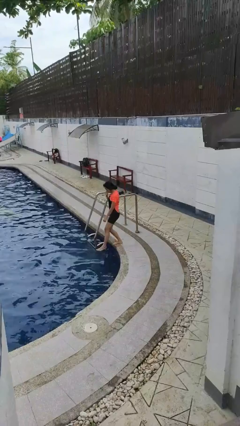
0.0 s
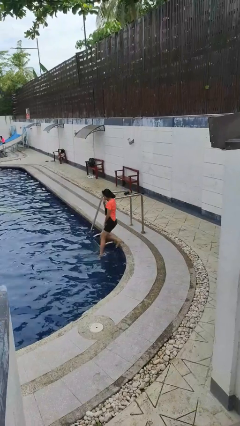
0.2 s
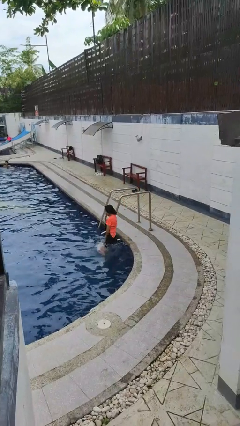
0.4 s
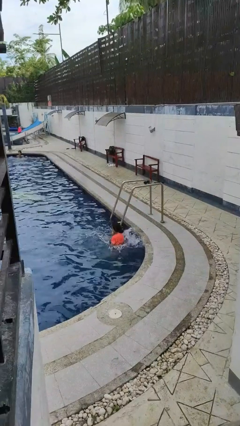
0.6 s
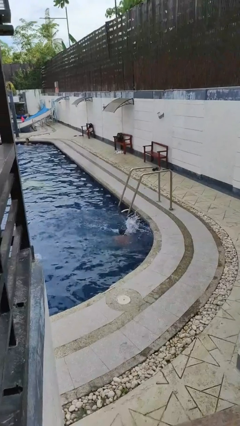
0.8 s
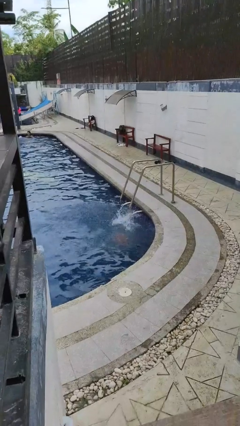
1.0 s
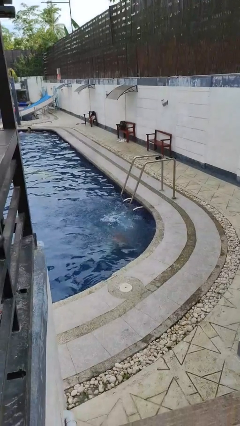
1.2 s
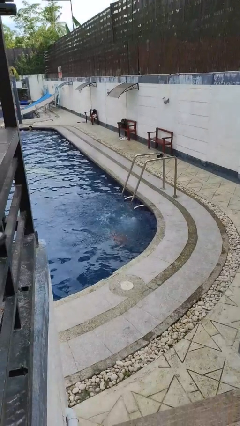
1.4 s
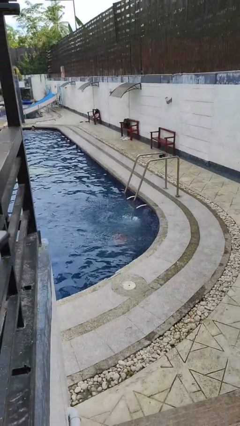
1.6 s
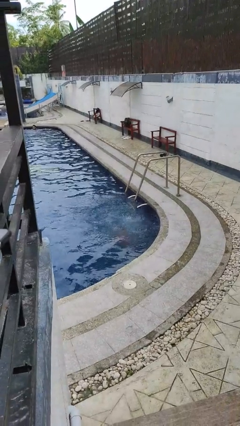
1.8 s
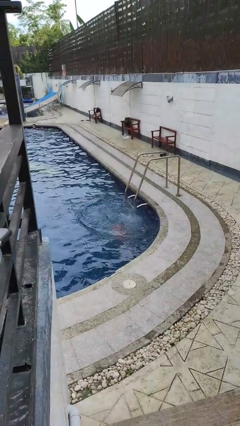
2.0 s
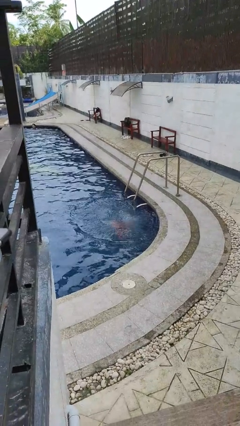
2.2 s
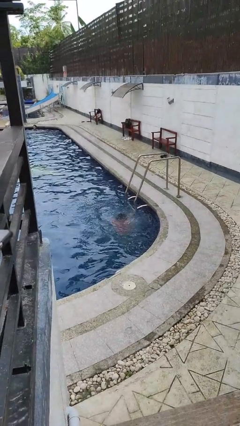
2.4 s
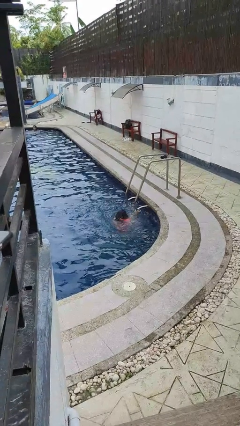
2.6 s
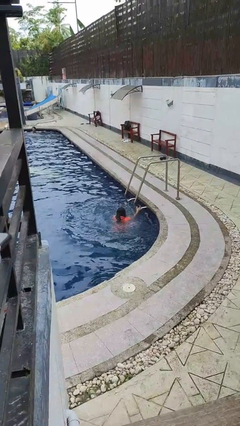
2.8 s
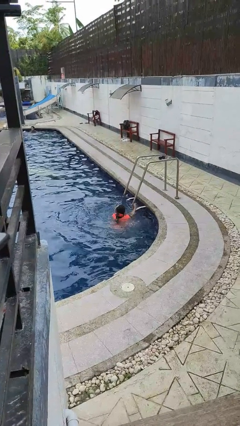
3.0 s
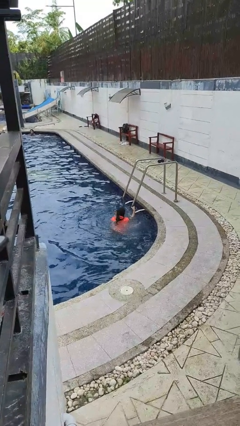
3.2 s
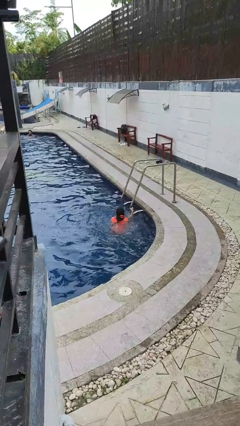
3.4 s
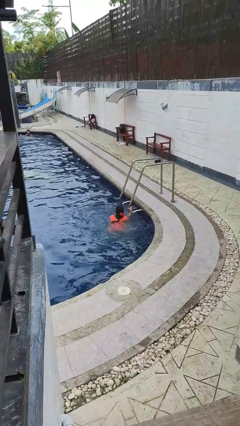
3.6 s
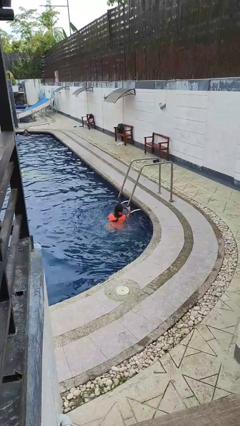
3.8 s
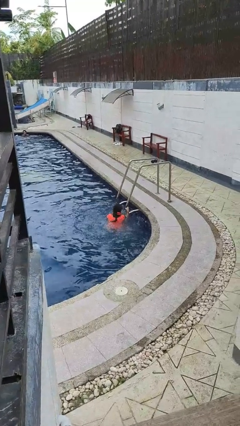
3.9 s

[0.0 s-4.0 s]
person jumps into pool

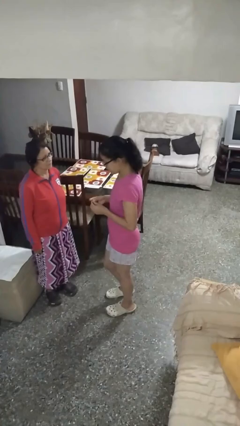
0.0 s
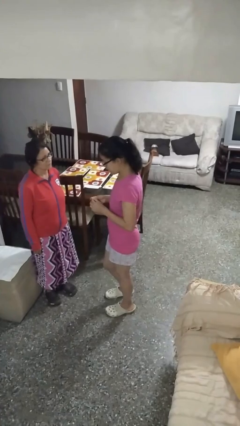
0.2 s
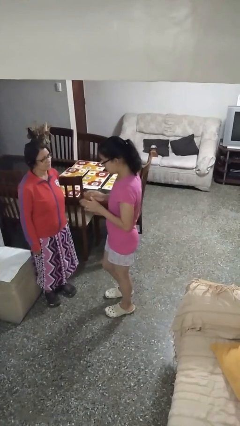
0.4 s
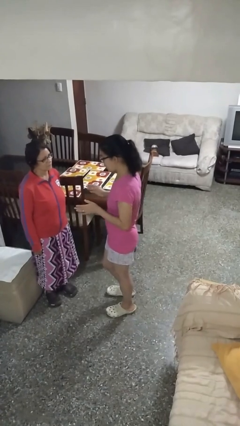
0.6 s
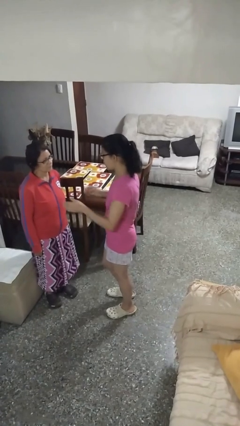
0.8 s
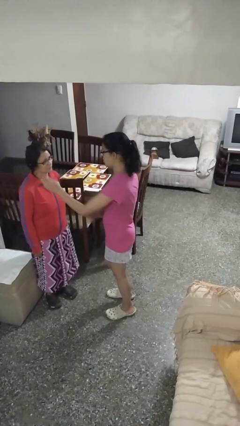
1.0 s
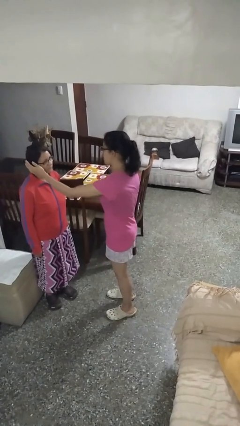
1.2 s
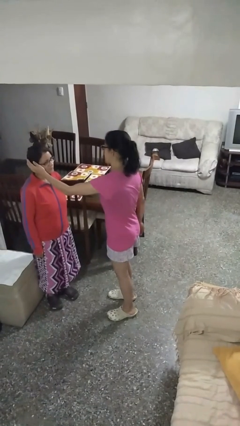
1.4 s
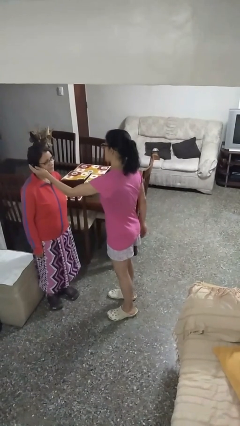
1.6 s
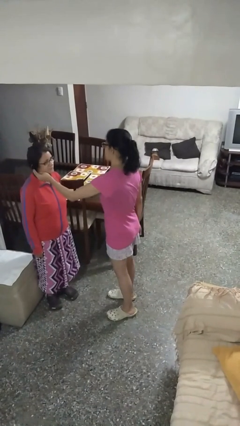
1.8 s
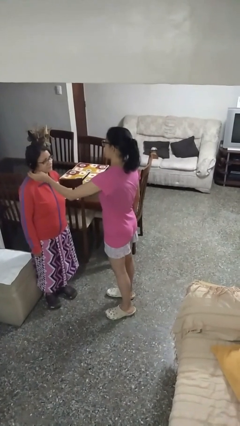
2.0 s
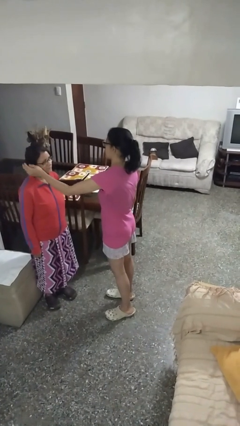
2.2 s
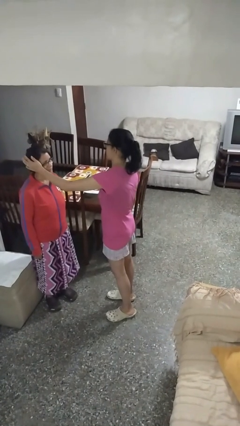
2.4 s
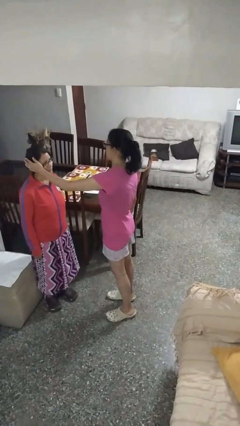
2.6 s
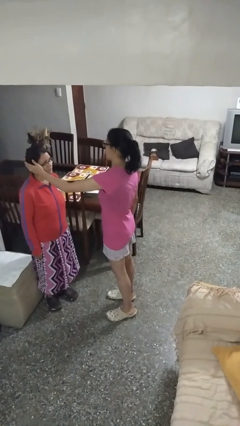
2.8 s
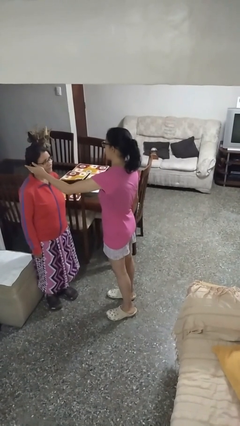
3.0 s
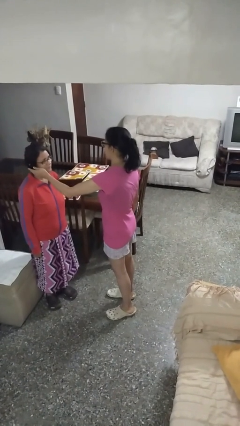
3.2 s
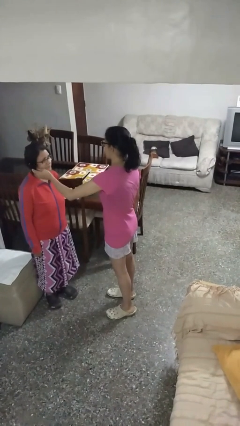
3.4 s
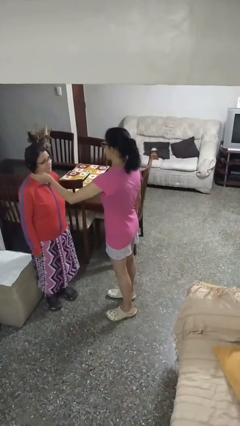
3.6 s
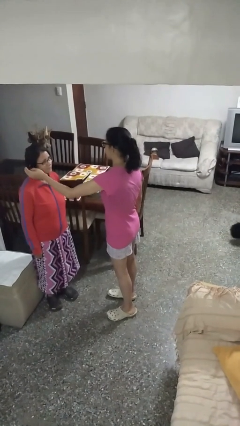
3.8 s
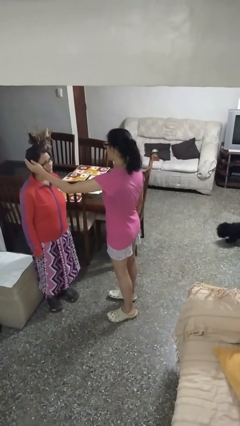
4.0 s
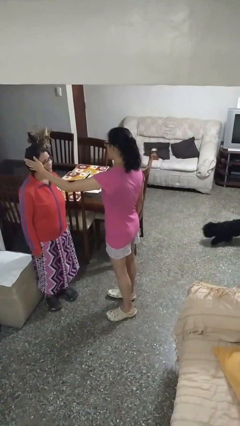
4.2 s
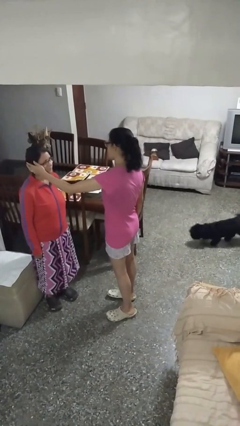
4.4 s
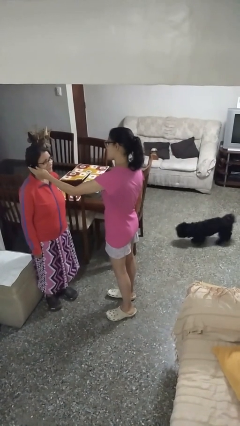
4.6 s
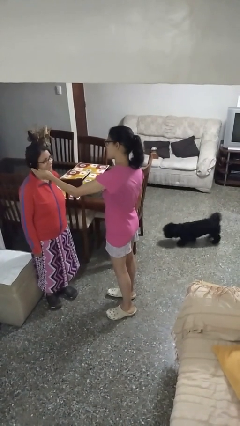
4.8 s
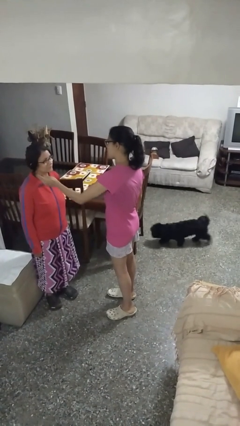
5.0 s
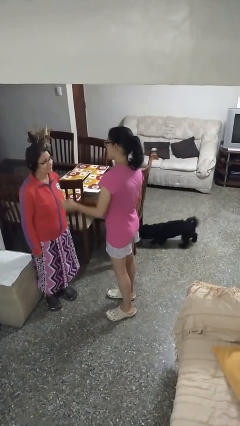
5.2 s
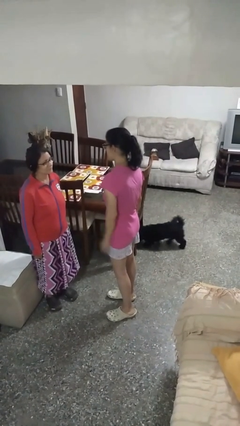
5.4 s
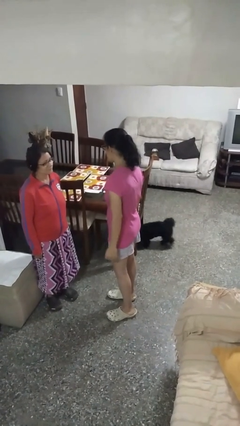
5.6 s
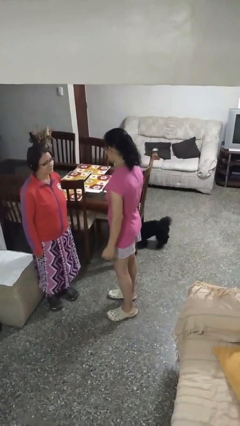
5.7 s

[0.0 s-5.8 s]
person touches face of person

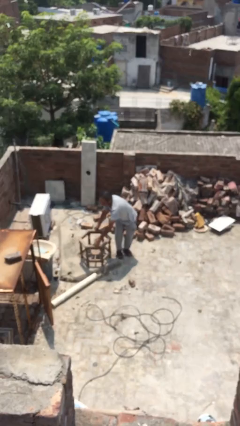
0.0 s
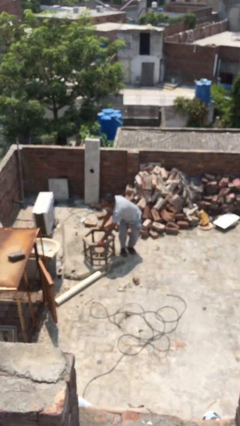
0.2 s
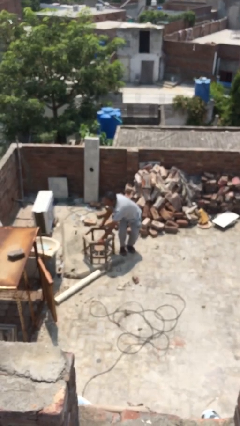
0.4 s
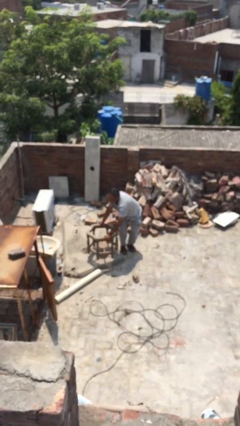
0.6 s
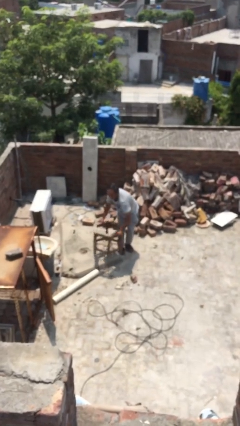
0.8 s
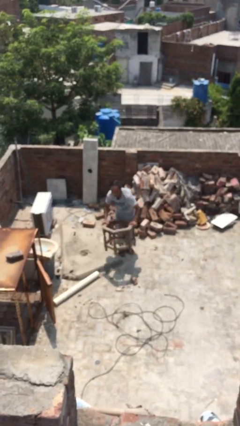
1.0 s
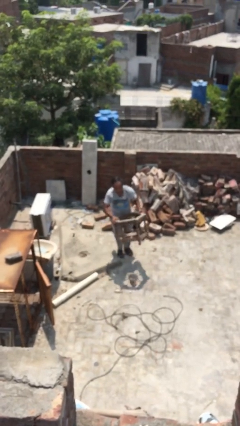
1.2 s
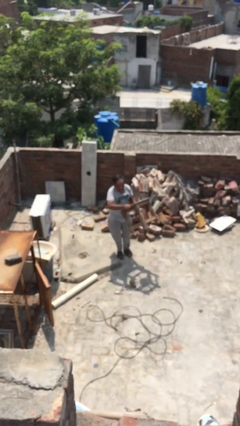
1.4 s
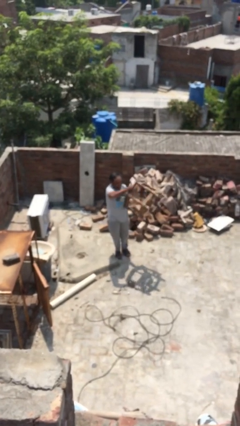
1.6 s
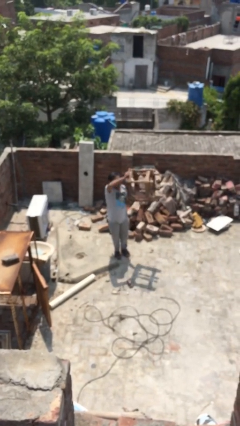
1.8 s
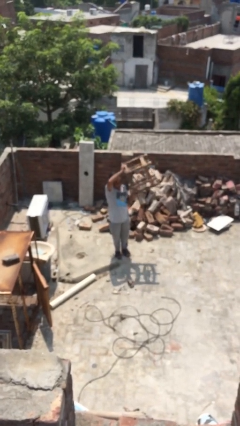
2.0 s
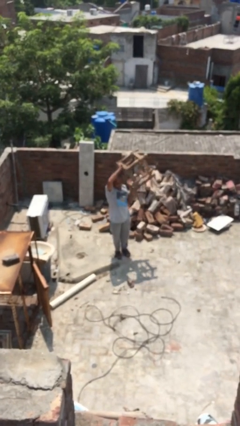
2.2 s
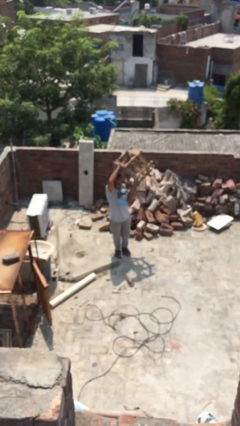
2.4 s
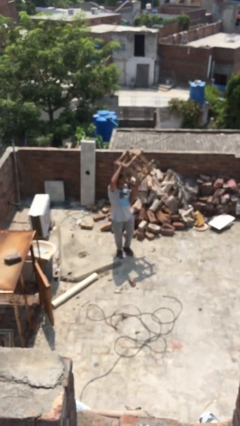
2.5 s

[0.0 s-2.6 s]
person picks up object from floor

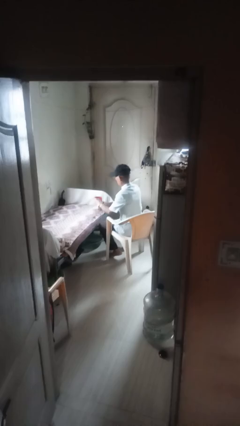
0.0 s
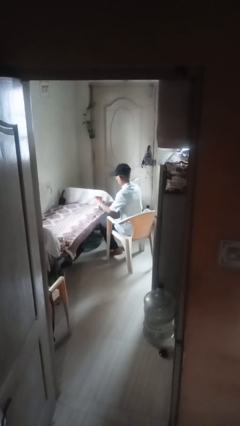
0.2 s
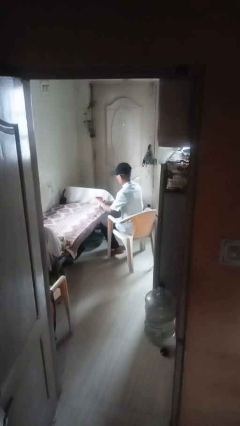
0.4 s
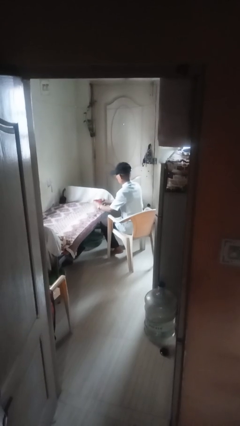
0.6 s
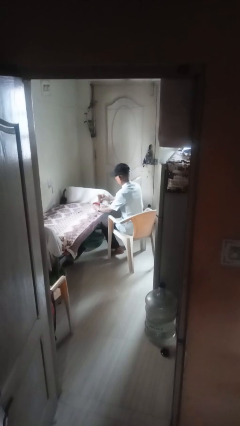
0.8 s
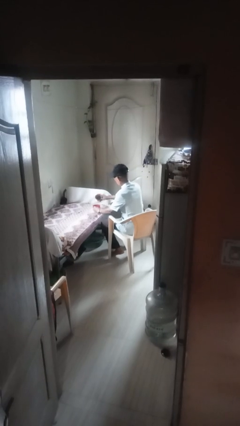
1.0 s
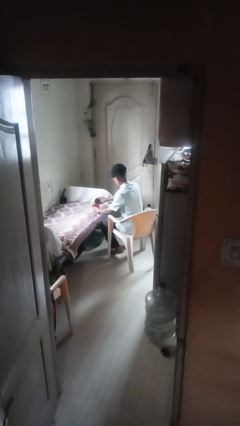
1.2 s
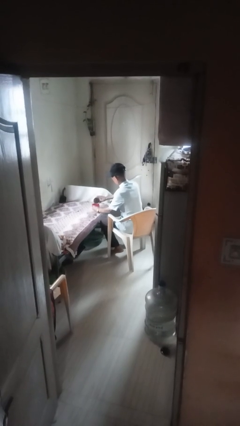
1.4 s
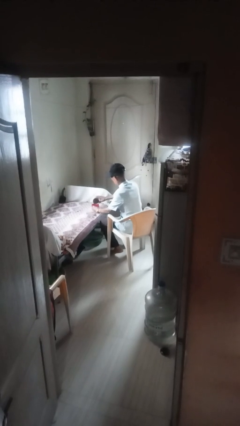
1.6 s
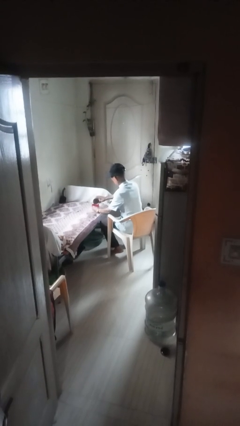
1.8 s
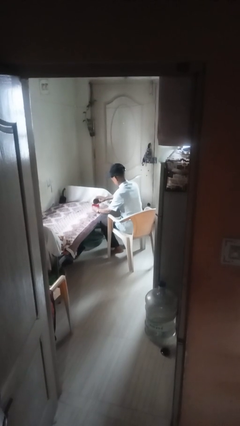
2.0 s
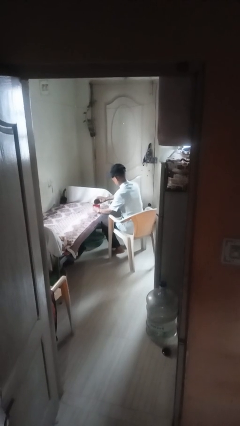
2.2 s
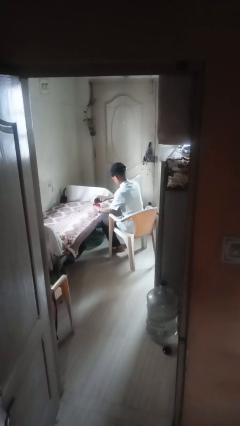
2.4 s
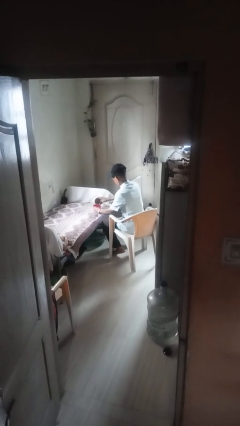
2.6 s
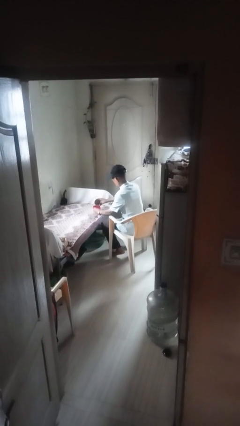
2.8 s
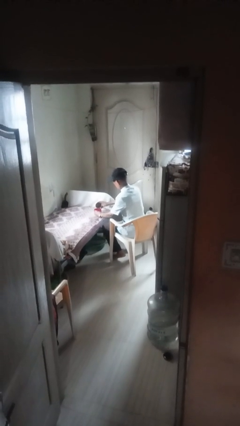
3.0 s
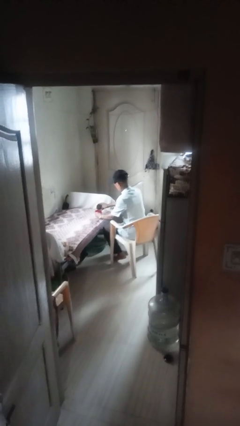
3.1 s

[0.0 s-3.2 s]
person pours coffee into mug

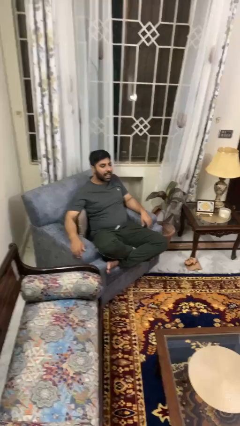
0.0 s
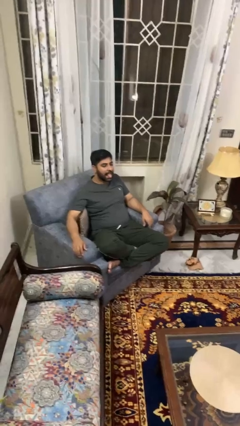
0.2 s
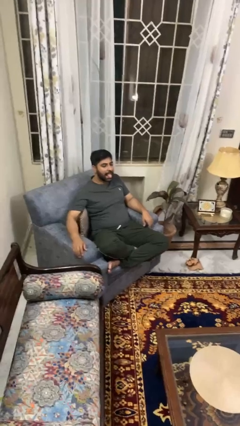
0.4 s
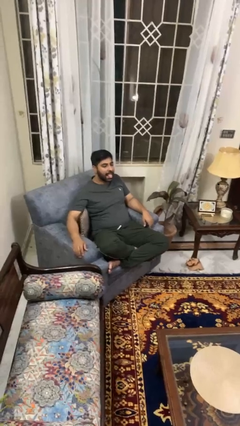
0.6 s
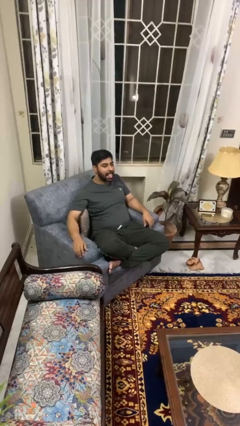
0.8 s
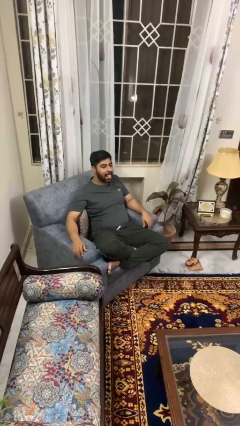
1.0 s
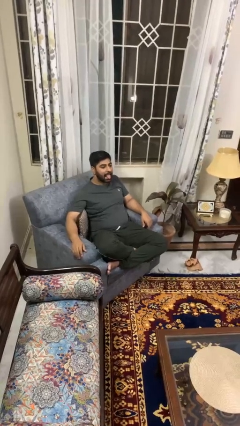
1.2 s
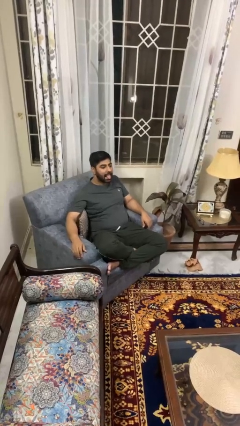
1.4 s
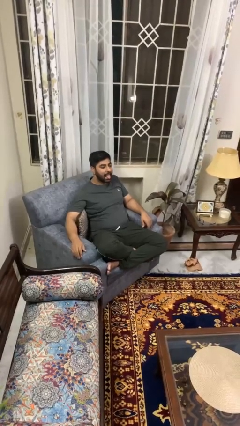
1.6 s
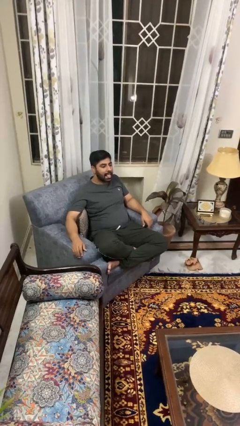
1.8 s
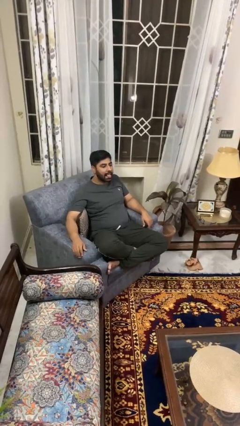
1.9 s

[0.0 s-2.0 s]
person sticks out tongue
